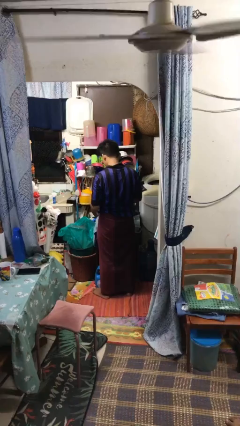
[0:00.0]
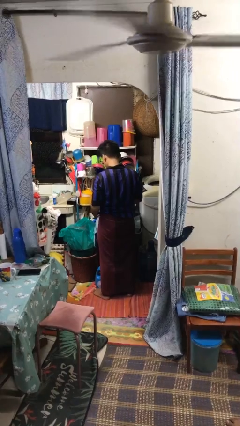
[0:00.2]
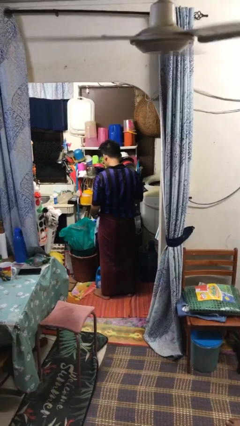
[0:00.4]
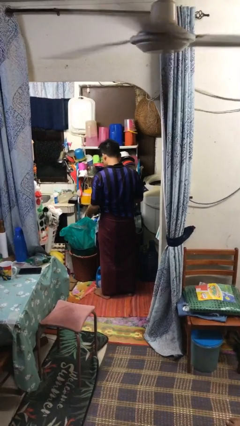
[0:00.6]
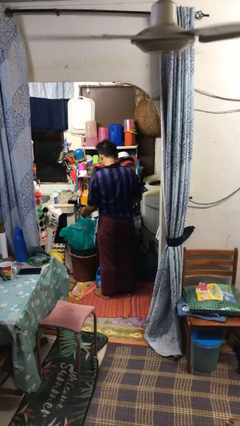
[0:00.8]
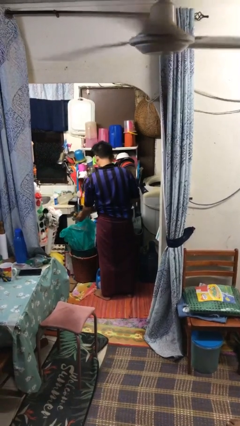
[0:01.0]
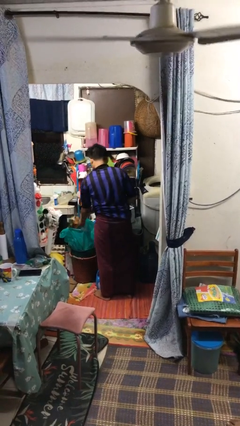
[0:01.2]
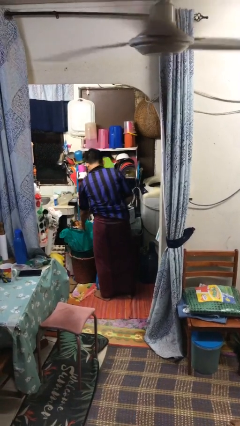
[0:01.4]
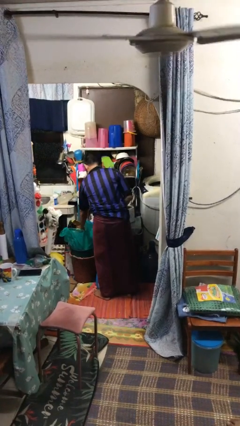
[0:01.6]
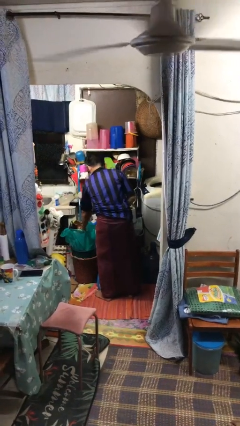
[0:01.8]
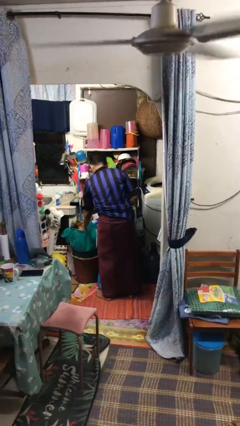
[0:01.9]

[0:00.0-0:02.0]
person discards trash

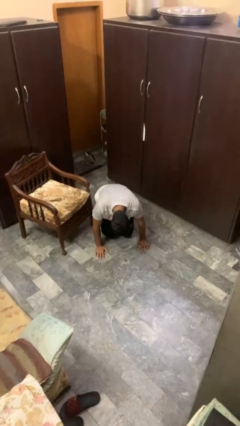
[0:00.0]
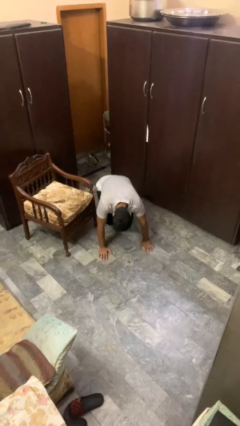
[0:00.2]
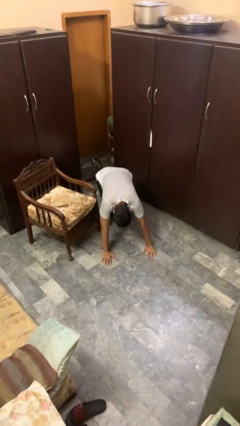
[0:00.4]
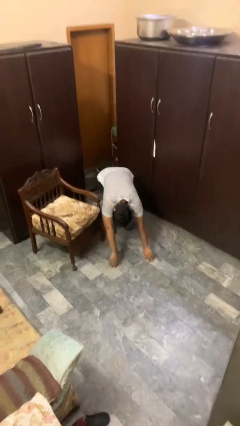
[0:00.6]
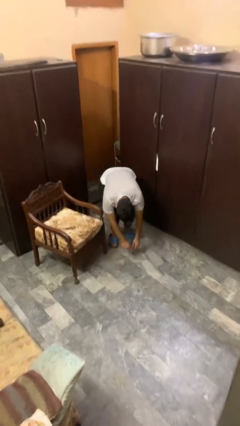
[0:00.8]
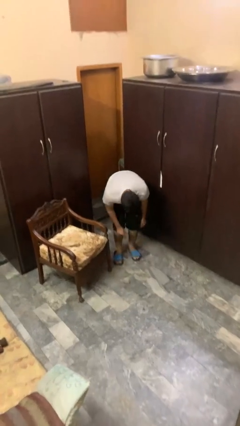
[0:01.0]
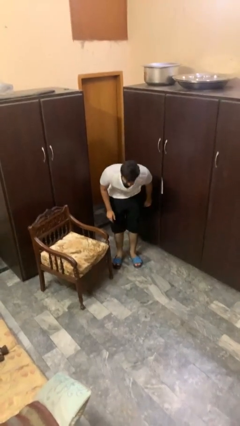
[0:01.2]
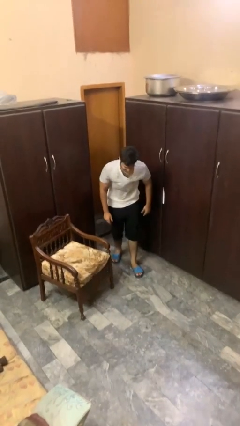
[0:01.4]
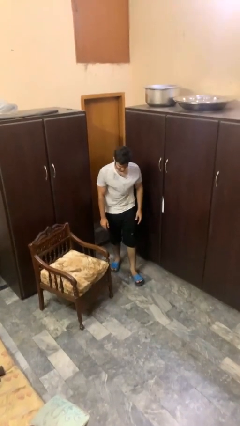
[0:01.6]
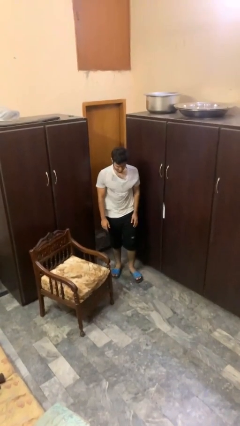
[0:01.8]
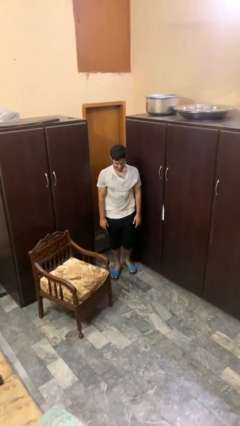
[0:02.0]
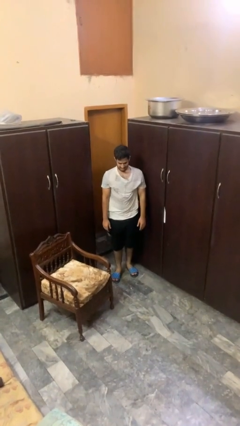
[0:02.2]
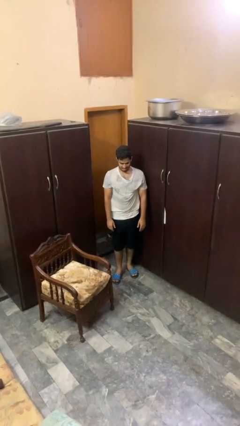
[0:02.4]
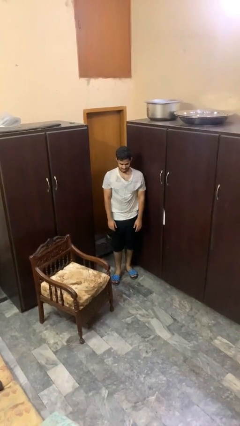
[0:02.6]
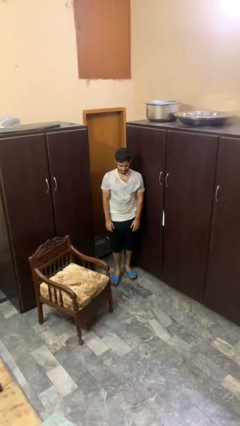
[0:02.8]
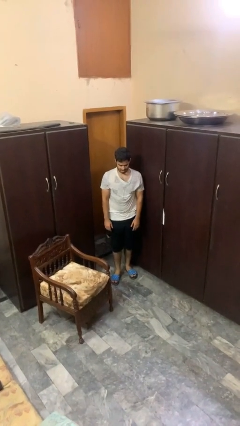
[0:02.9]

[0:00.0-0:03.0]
person stands up from floor

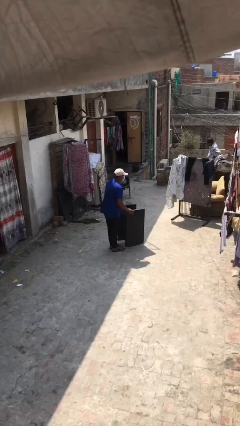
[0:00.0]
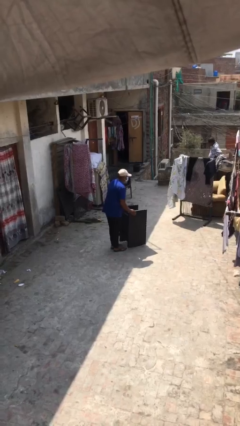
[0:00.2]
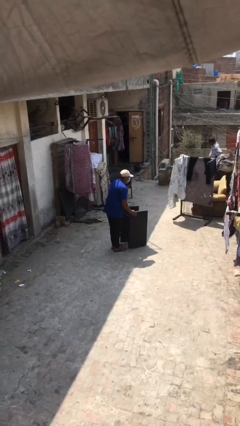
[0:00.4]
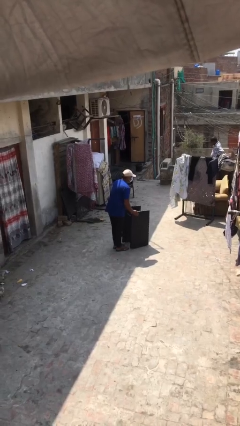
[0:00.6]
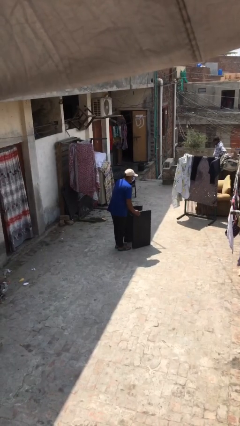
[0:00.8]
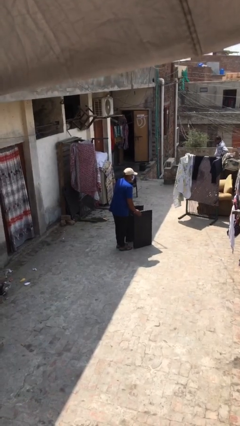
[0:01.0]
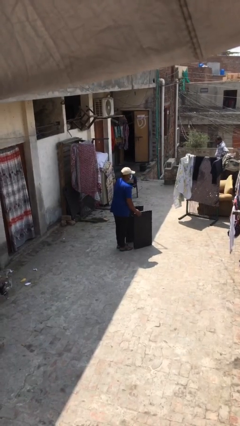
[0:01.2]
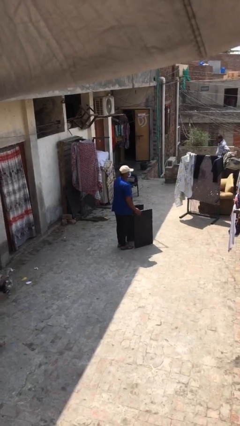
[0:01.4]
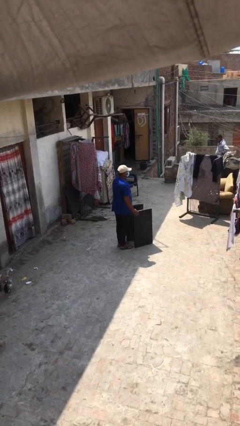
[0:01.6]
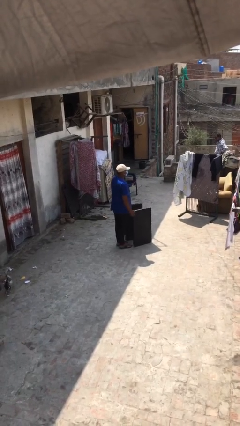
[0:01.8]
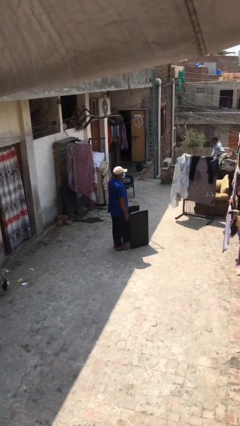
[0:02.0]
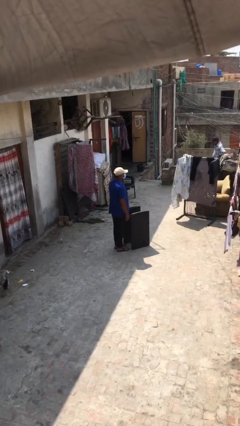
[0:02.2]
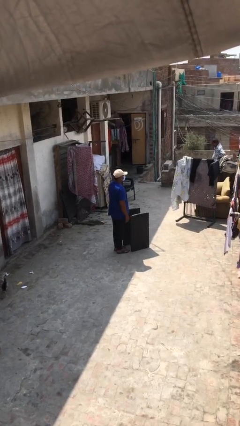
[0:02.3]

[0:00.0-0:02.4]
person puts down object on floor

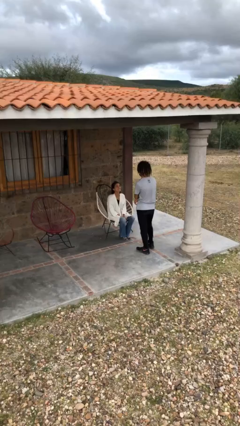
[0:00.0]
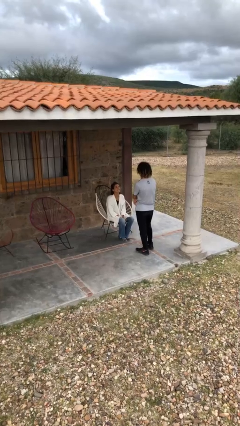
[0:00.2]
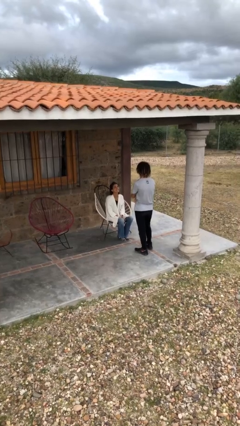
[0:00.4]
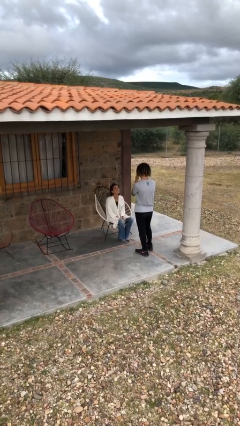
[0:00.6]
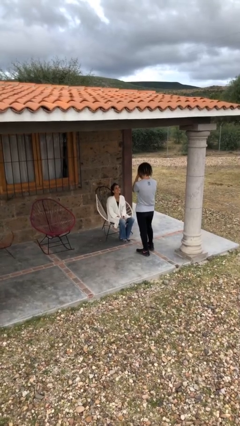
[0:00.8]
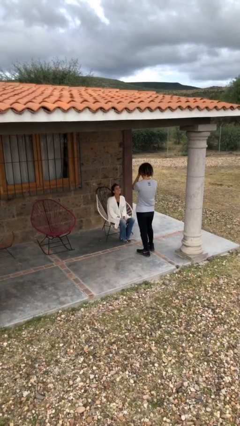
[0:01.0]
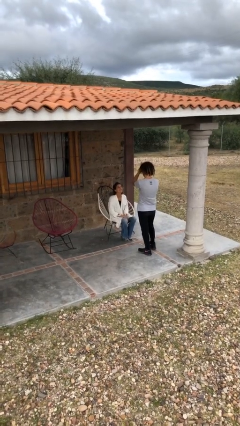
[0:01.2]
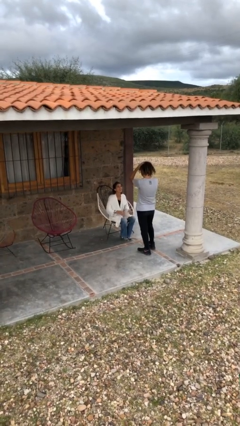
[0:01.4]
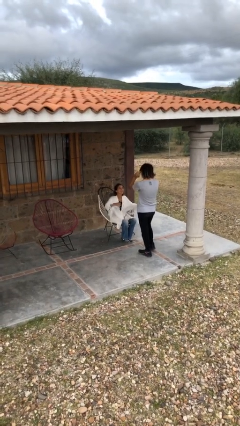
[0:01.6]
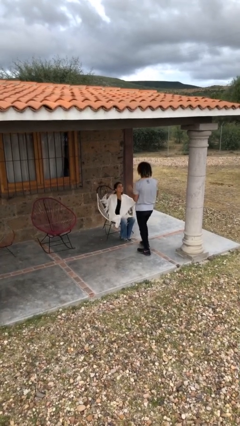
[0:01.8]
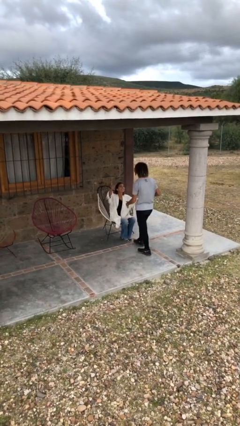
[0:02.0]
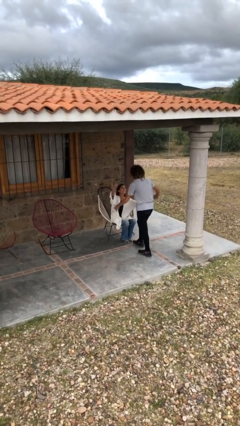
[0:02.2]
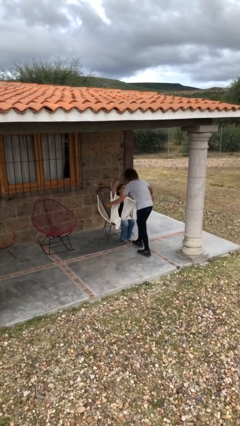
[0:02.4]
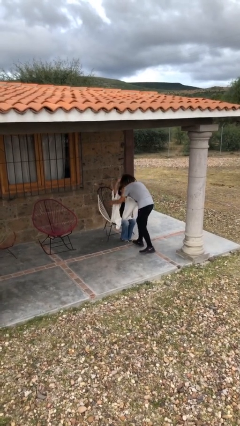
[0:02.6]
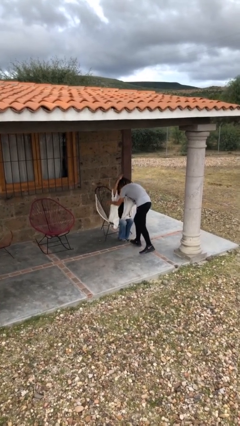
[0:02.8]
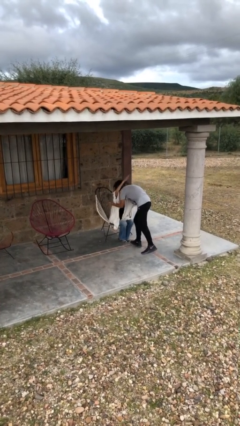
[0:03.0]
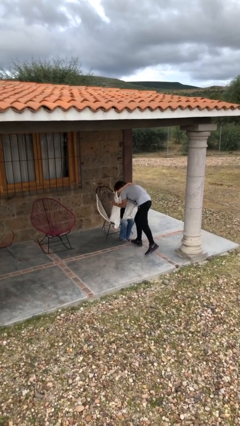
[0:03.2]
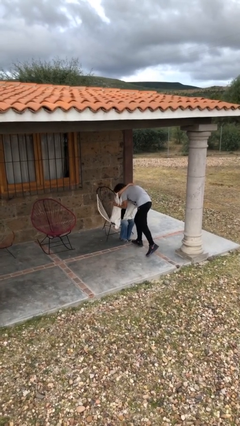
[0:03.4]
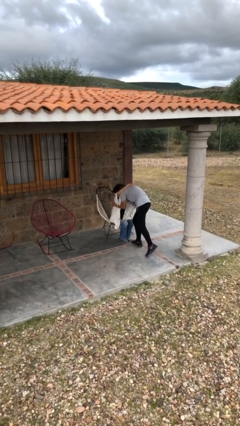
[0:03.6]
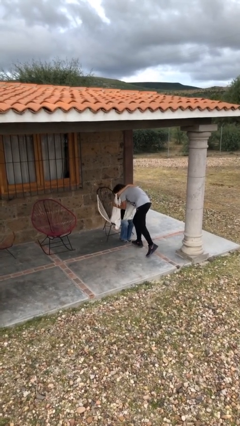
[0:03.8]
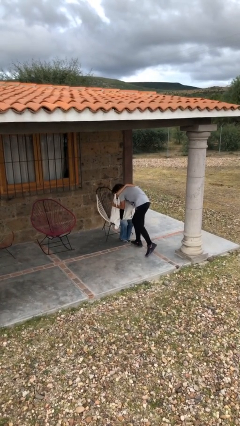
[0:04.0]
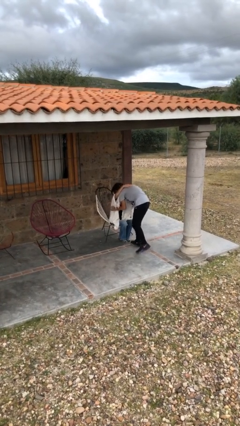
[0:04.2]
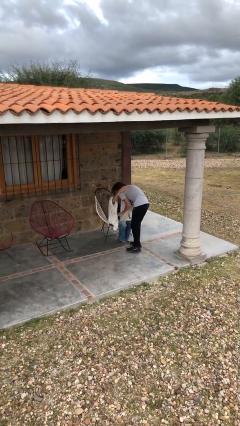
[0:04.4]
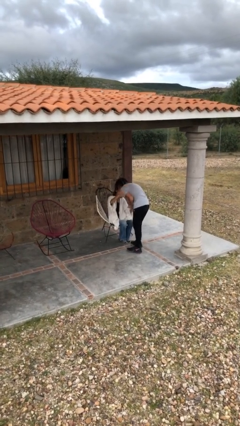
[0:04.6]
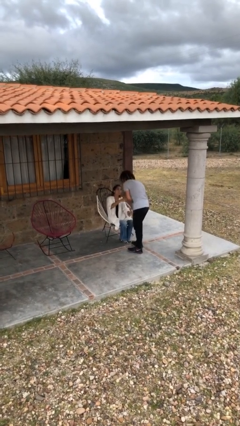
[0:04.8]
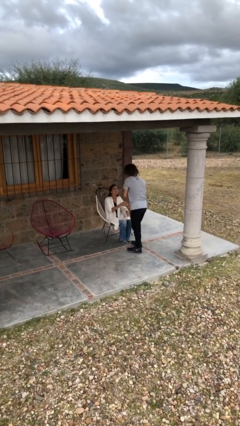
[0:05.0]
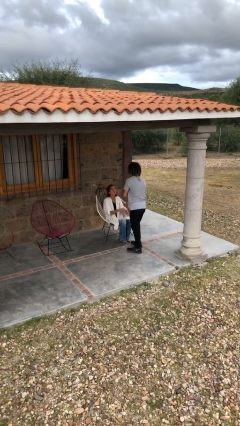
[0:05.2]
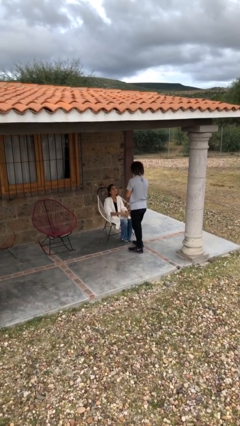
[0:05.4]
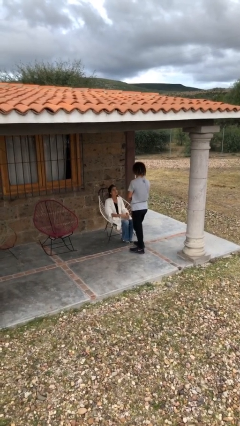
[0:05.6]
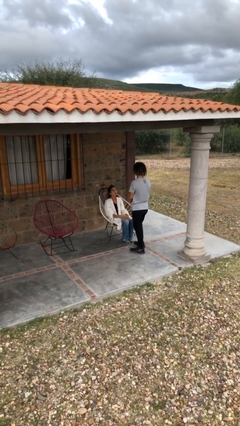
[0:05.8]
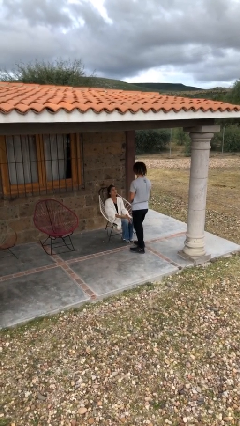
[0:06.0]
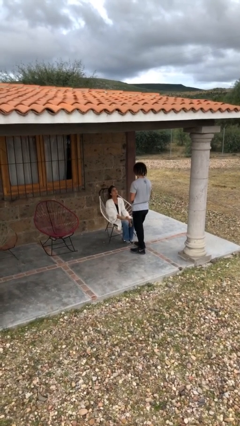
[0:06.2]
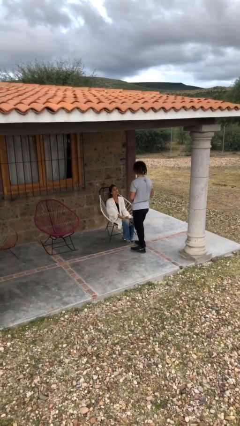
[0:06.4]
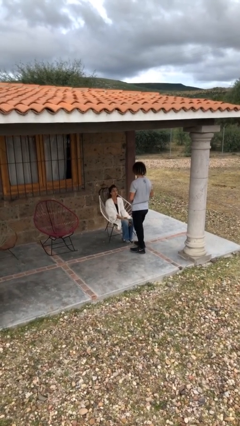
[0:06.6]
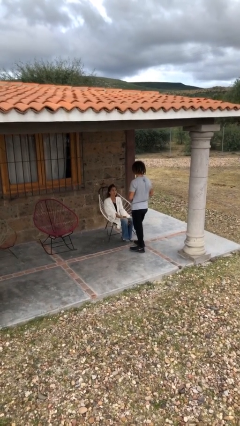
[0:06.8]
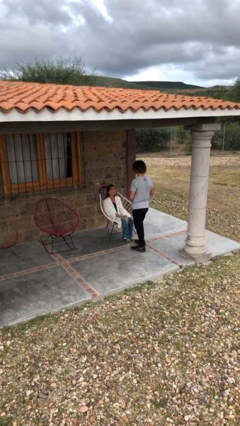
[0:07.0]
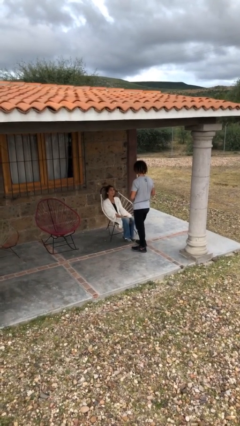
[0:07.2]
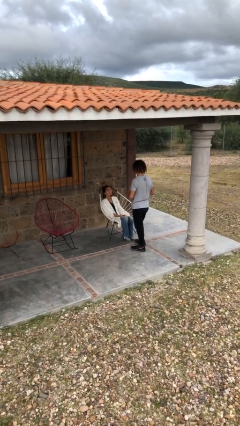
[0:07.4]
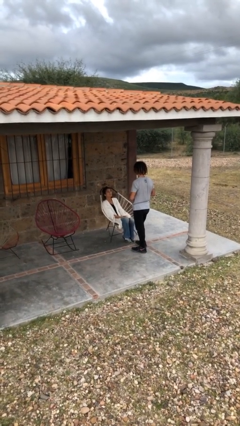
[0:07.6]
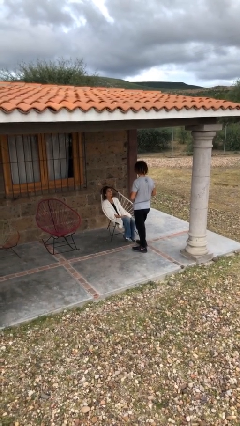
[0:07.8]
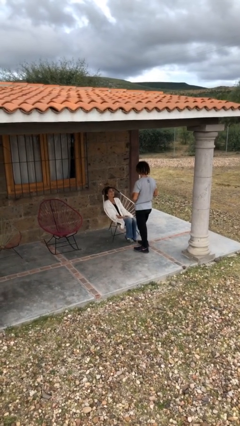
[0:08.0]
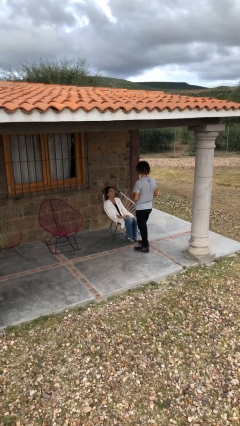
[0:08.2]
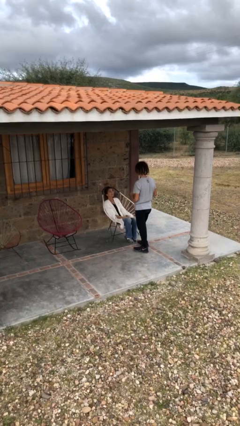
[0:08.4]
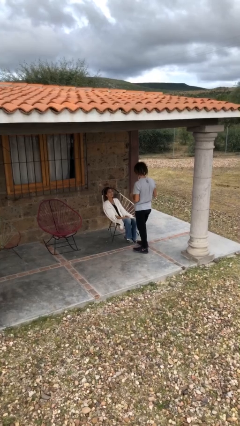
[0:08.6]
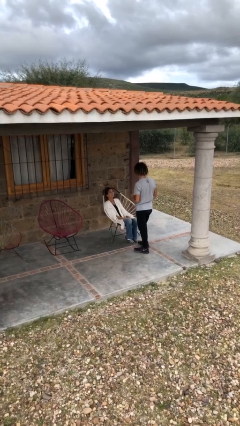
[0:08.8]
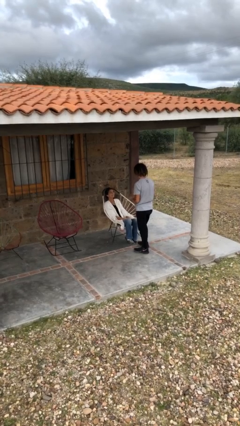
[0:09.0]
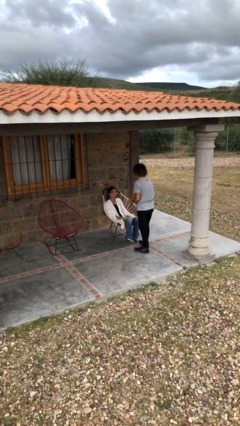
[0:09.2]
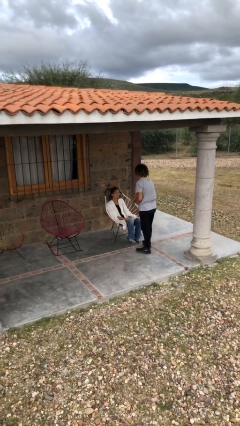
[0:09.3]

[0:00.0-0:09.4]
person embraces person

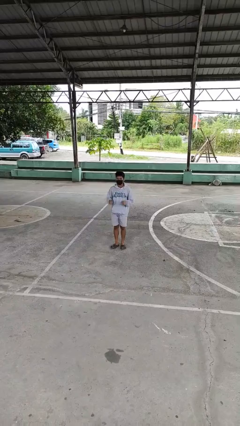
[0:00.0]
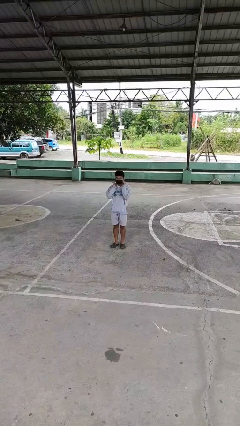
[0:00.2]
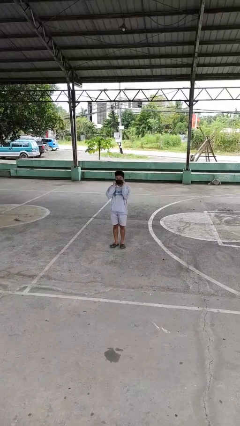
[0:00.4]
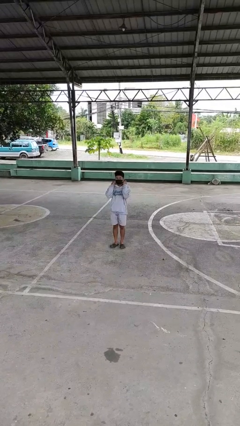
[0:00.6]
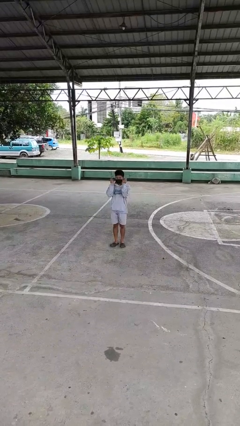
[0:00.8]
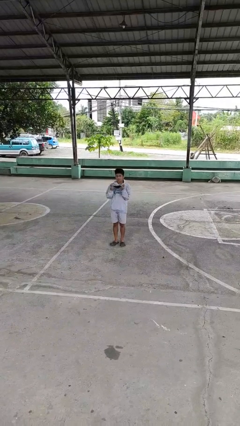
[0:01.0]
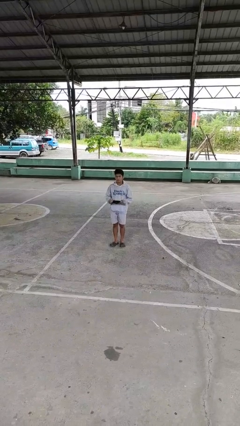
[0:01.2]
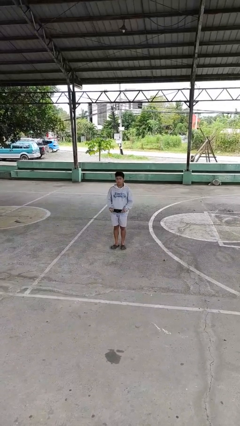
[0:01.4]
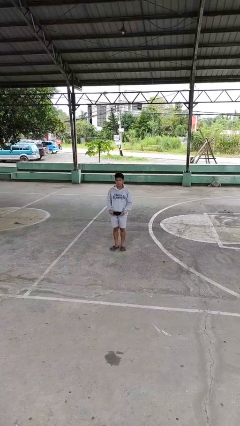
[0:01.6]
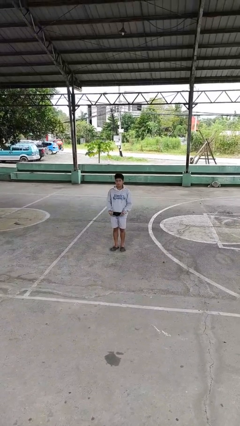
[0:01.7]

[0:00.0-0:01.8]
person takes off facemask
